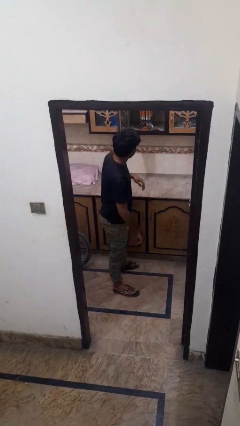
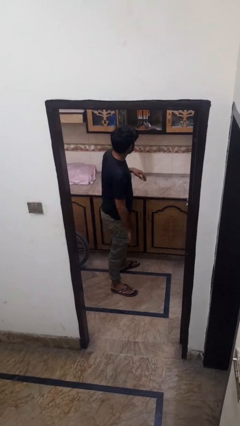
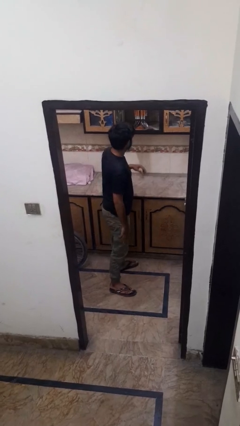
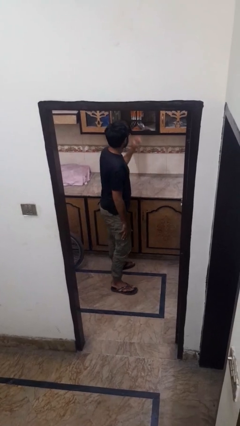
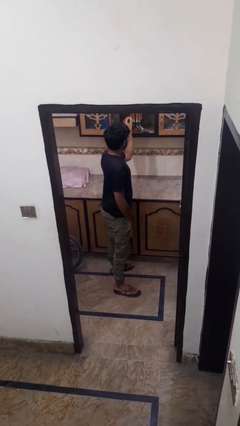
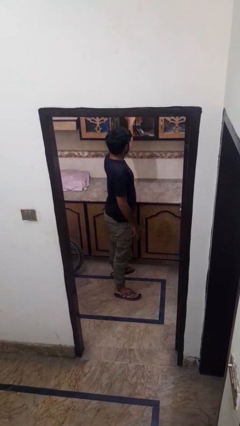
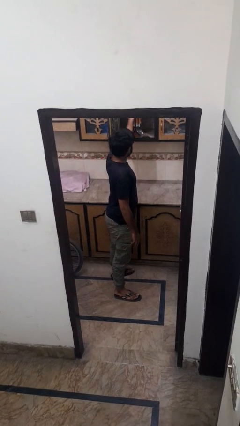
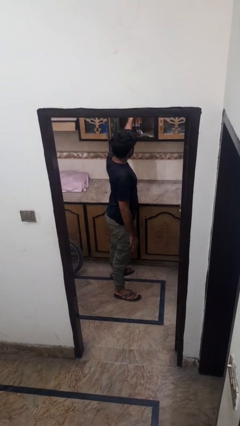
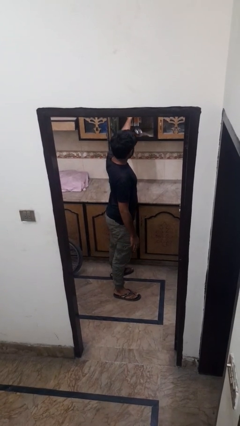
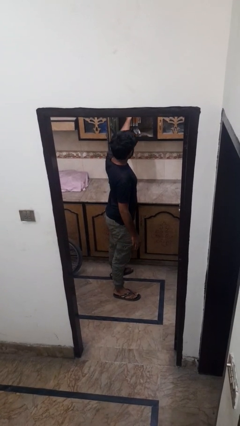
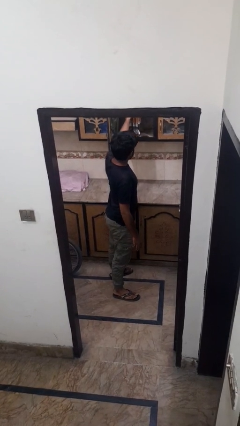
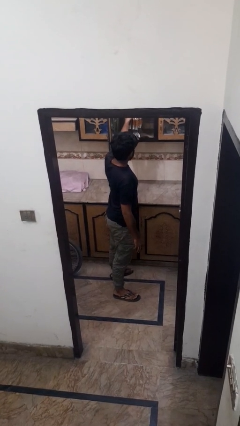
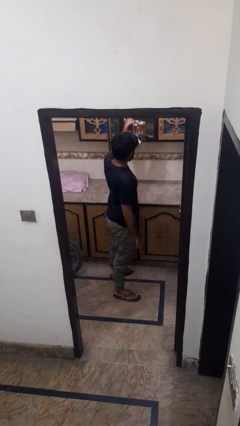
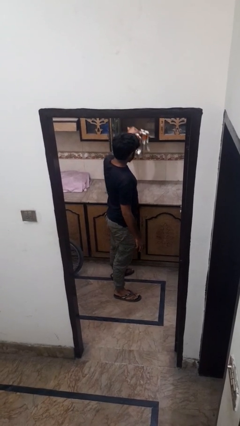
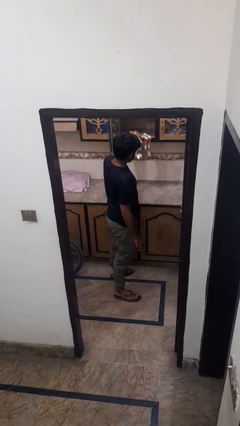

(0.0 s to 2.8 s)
person picks up object from cabinet

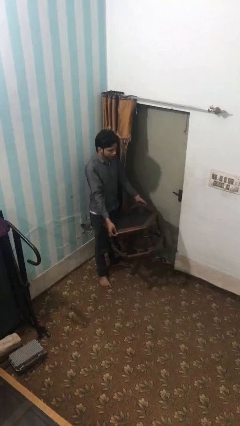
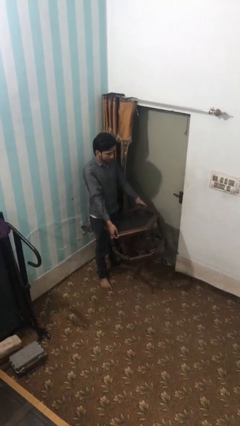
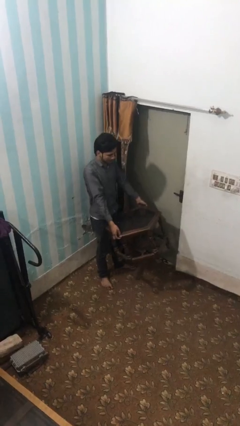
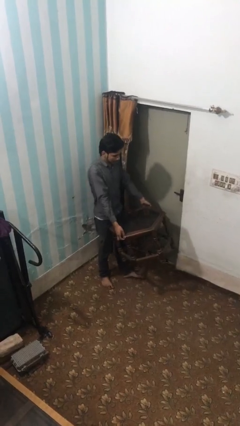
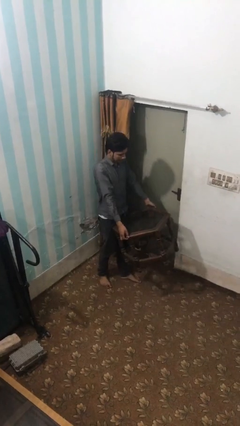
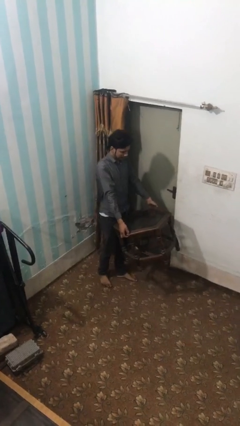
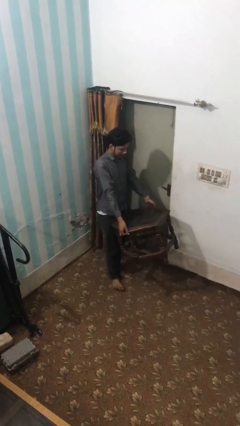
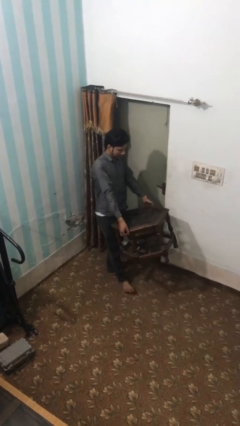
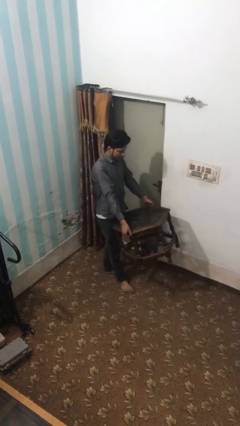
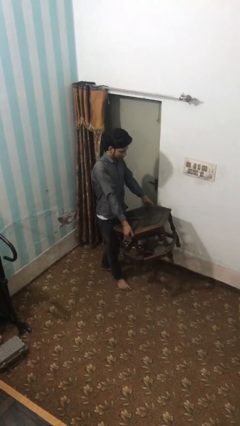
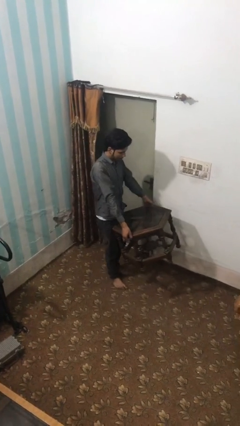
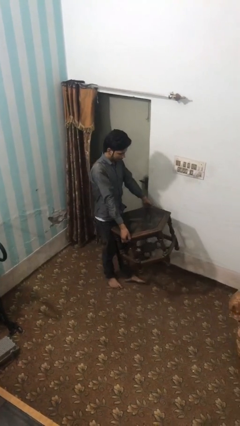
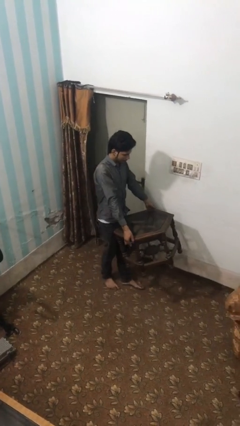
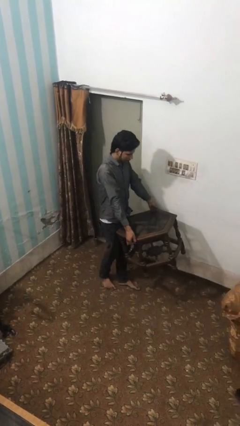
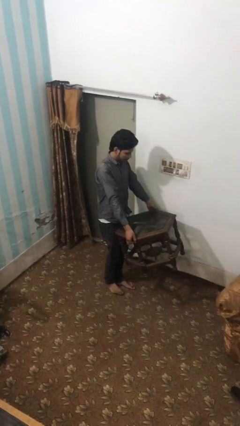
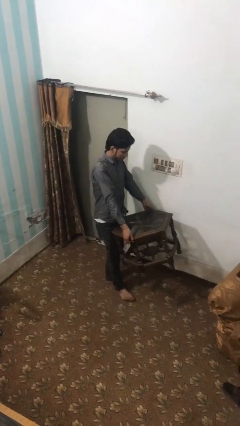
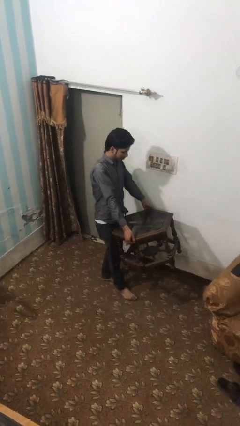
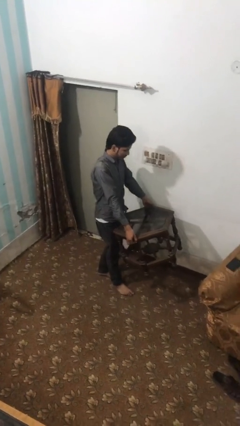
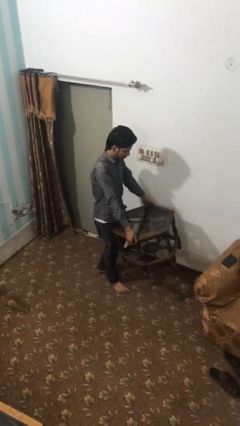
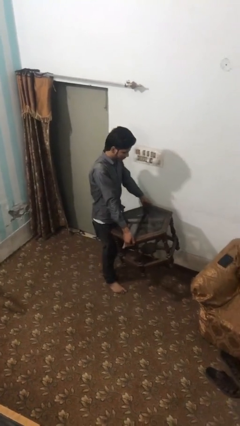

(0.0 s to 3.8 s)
person carries heavy object

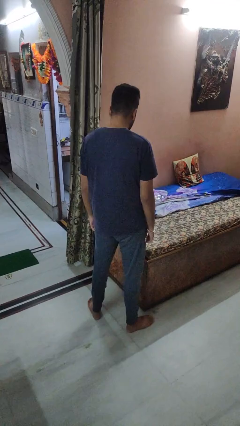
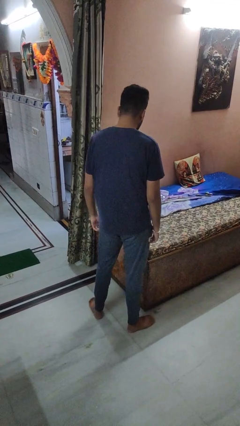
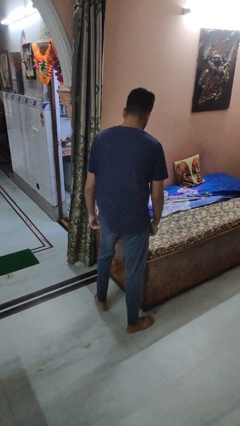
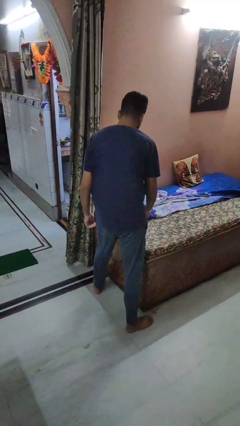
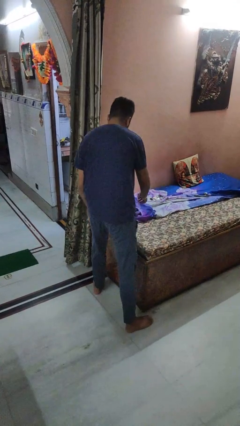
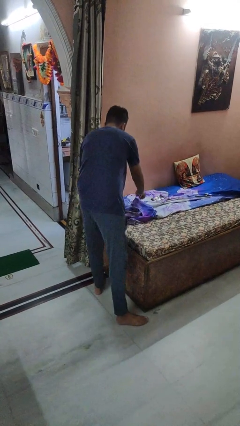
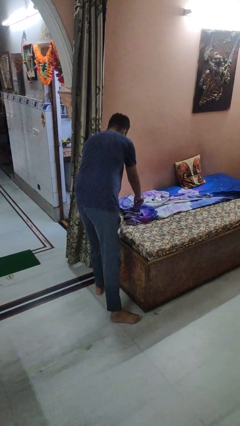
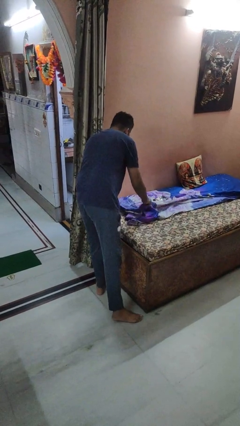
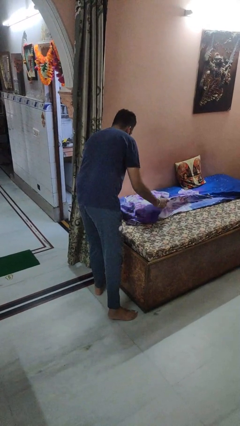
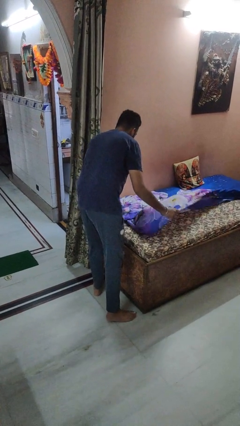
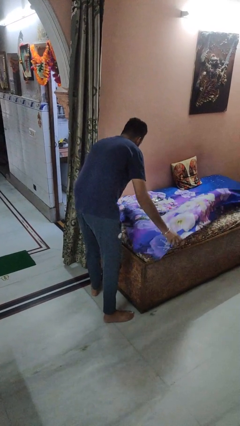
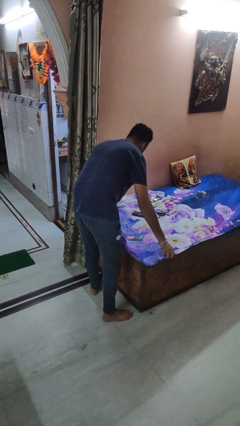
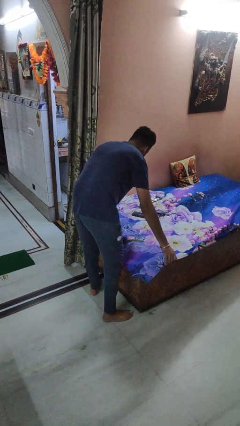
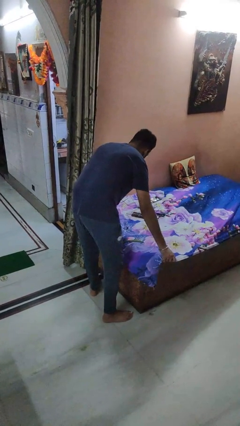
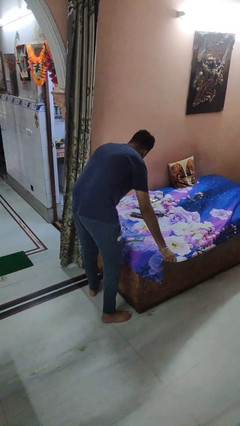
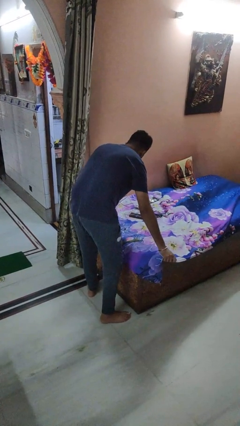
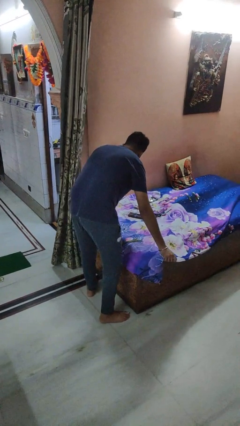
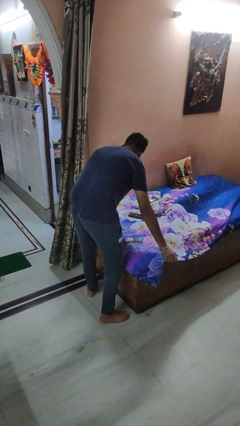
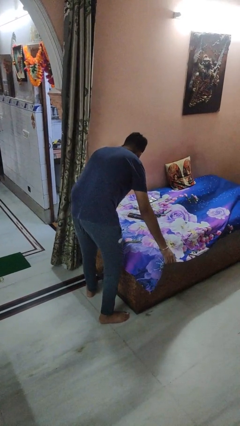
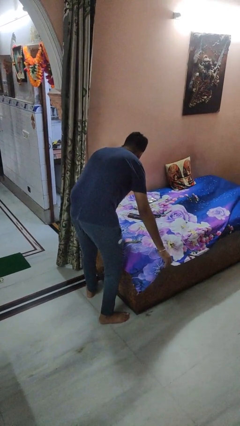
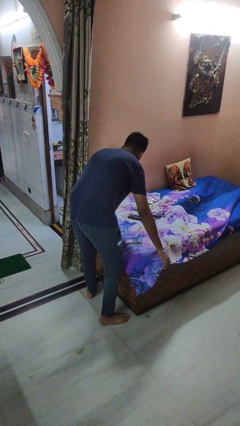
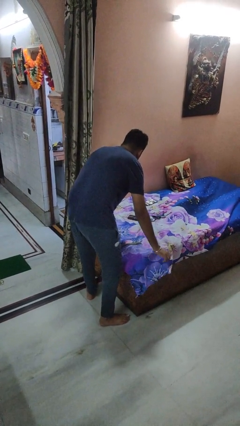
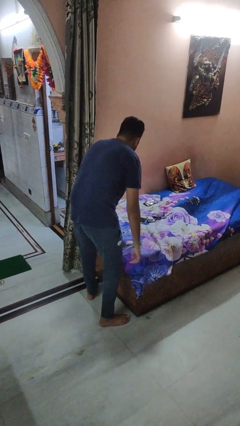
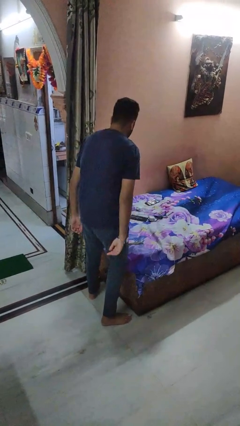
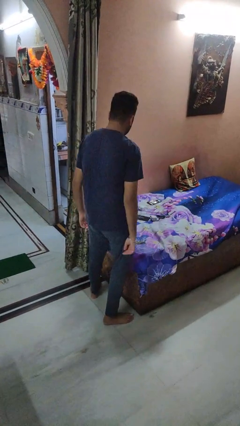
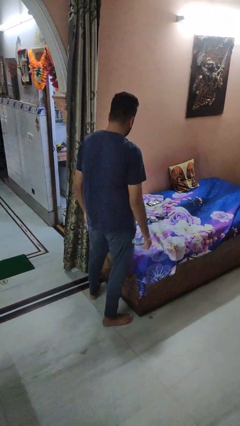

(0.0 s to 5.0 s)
person makes bed

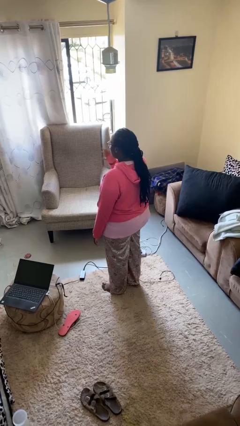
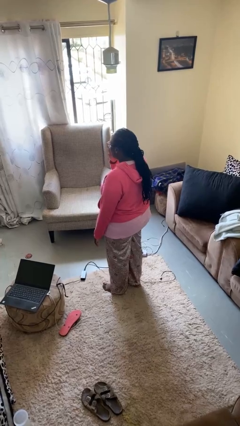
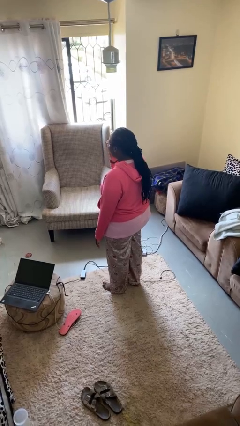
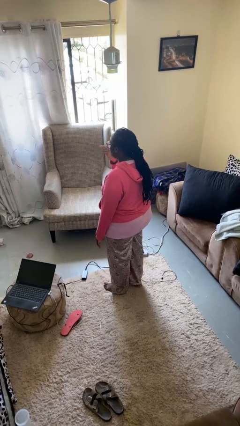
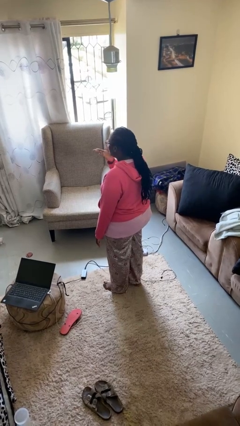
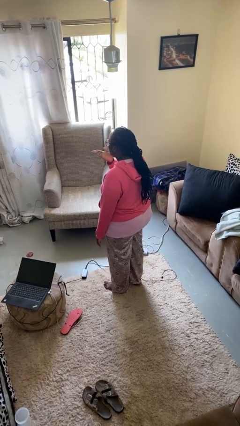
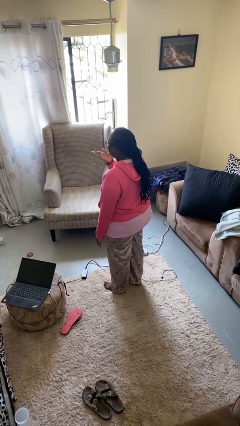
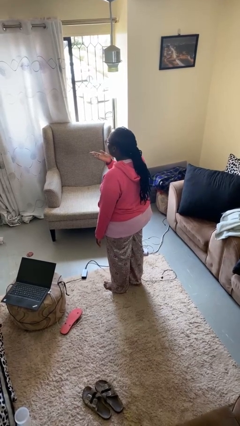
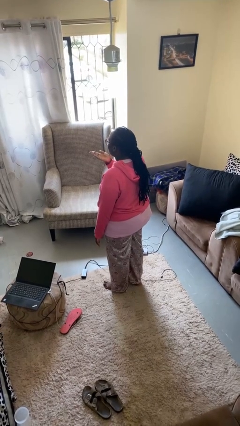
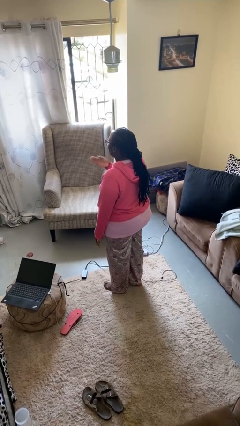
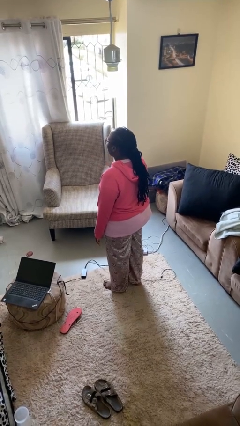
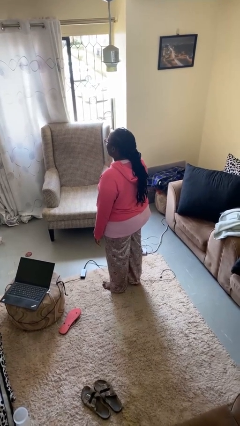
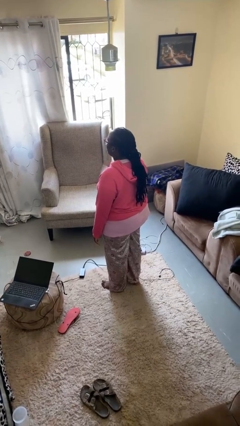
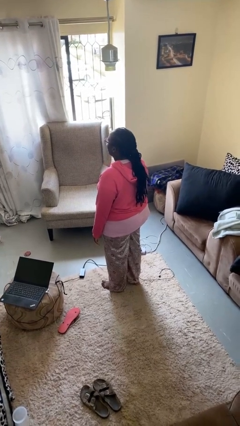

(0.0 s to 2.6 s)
person gestures blow kiss

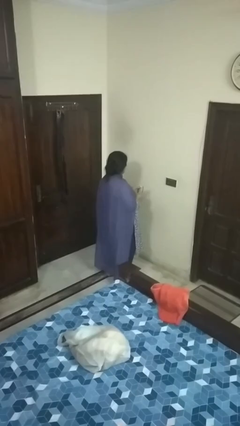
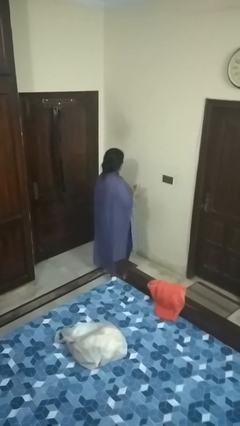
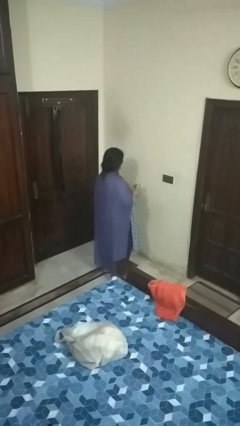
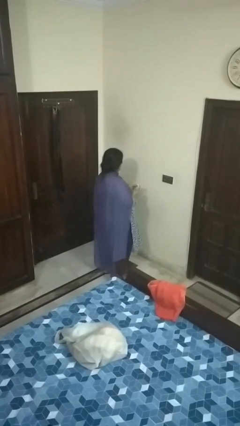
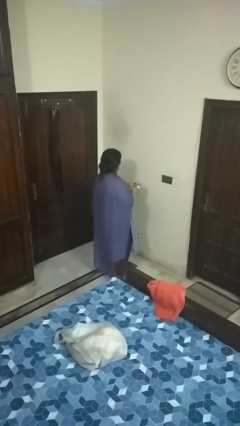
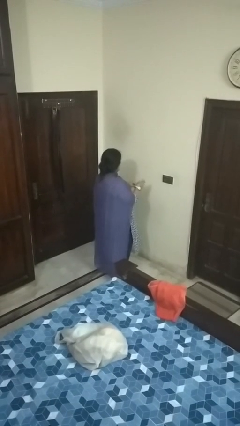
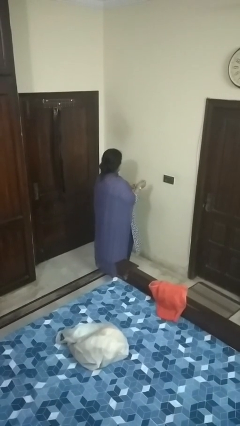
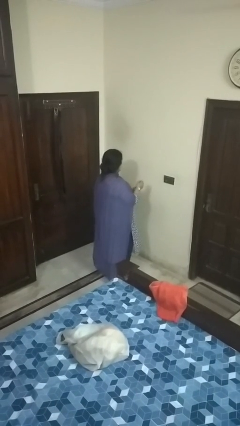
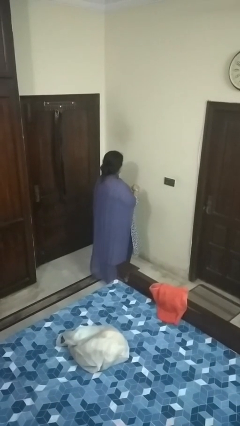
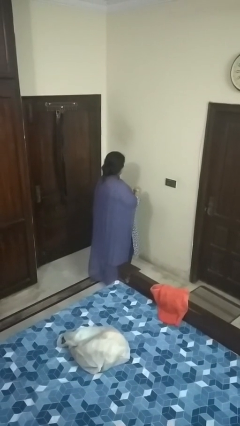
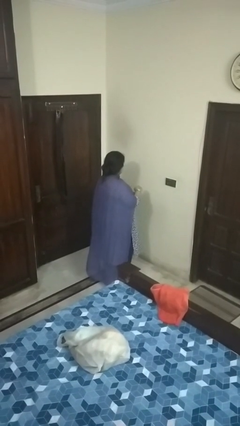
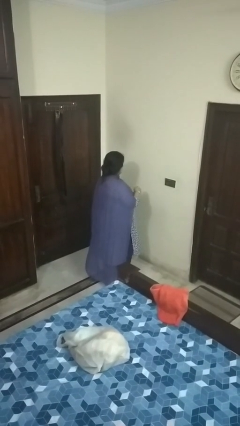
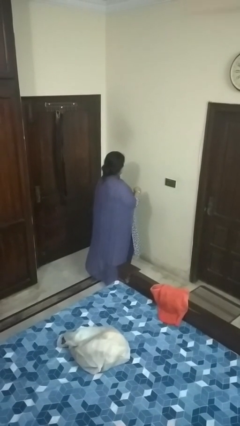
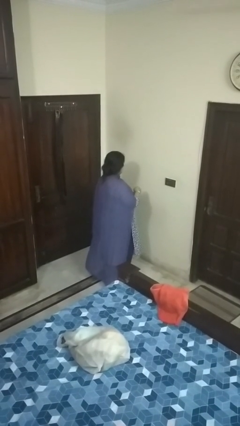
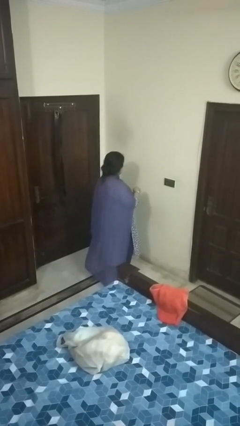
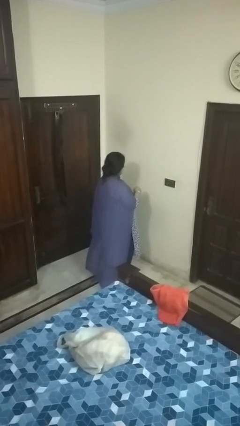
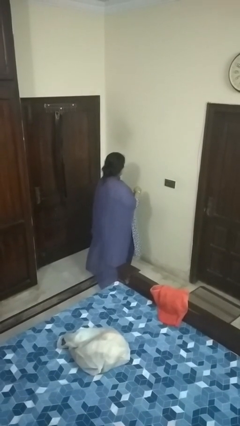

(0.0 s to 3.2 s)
person puts on wristwatch

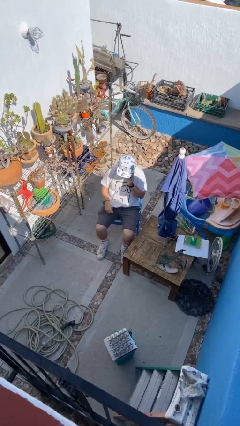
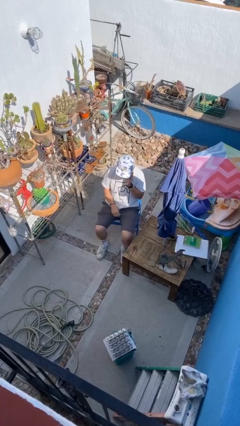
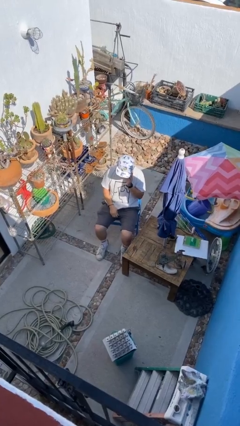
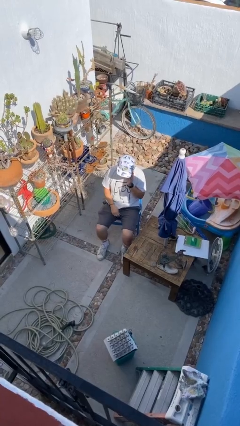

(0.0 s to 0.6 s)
person talks on phone
